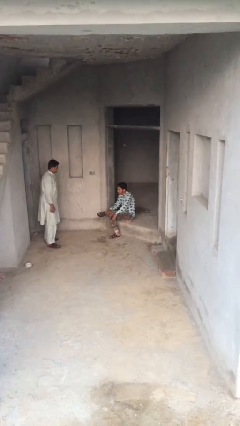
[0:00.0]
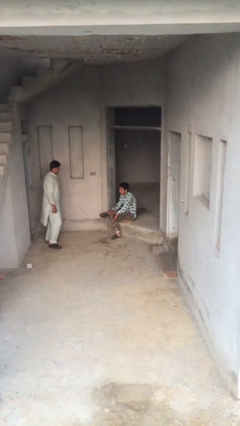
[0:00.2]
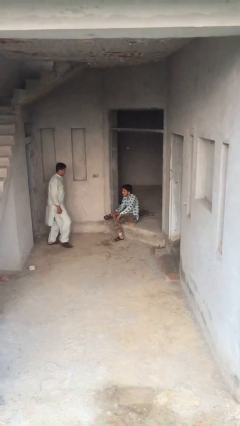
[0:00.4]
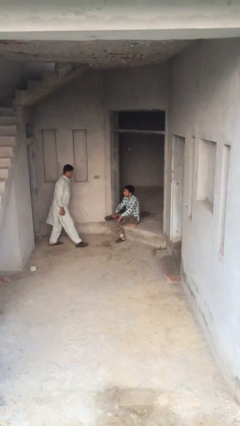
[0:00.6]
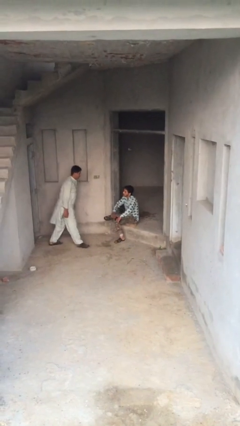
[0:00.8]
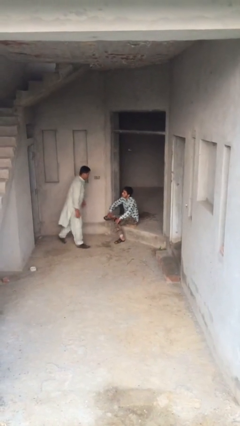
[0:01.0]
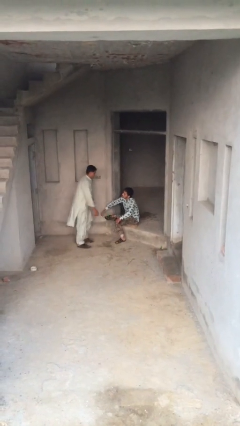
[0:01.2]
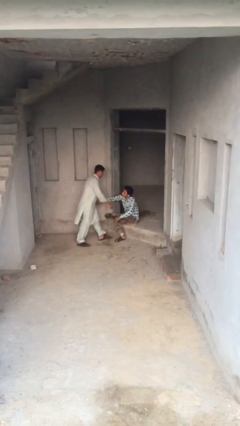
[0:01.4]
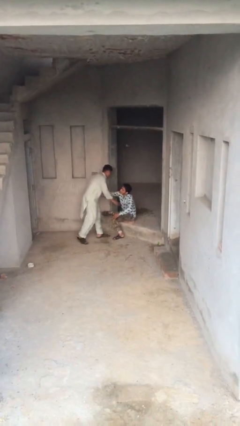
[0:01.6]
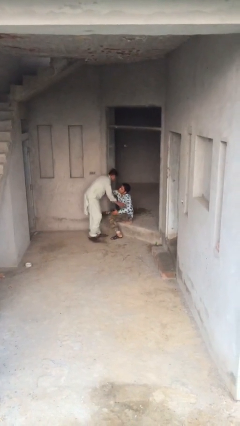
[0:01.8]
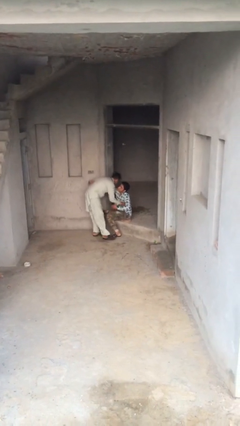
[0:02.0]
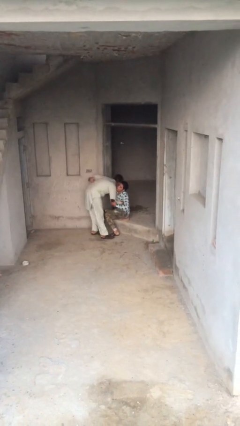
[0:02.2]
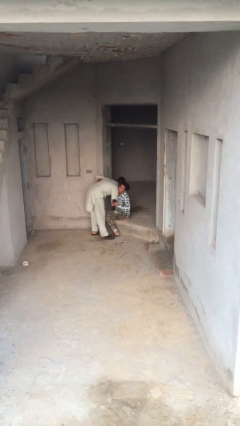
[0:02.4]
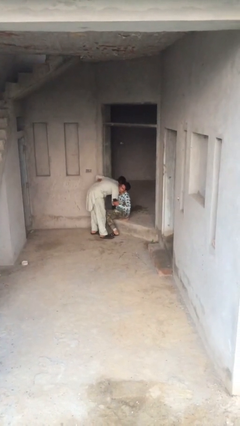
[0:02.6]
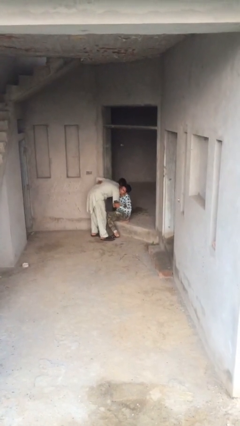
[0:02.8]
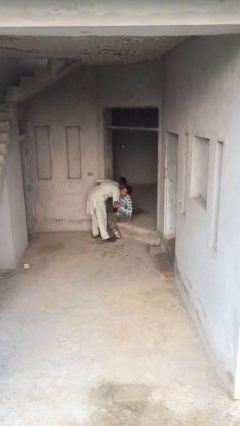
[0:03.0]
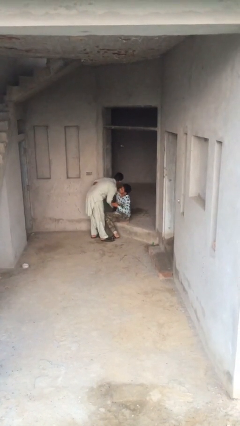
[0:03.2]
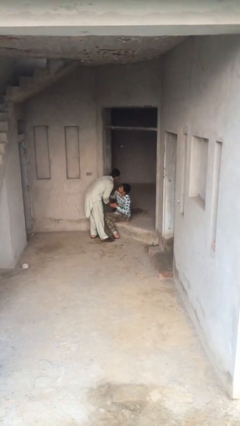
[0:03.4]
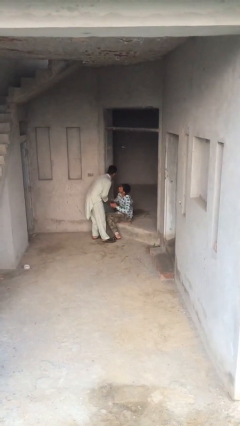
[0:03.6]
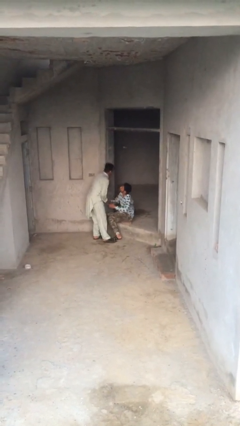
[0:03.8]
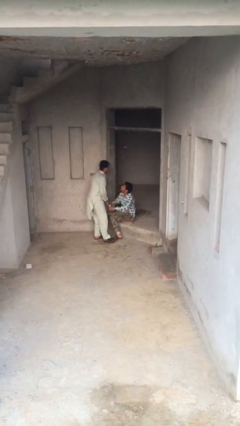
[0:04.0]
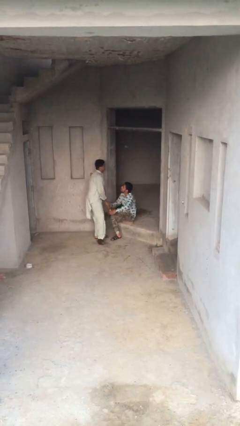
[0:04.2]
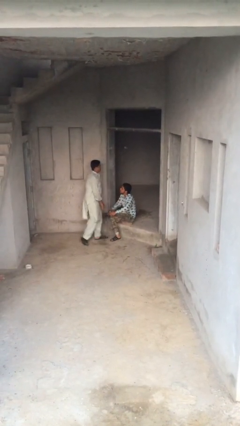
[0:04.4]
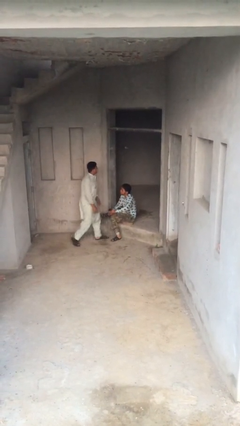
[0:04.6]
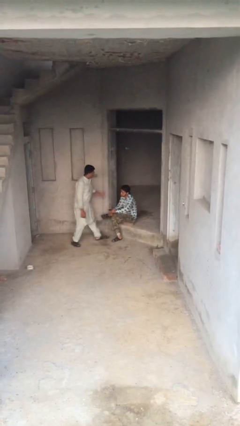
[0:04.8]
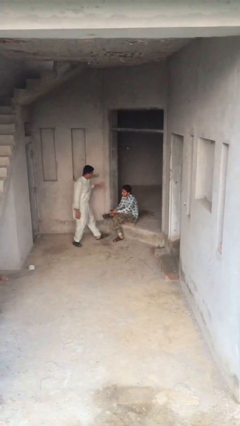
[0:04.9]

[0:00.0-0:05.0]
person embraces person

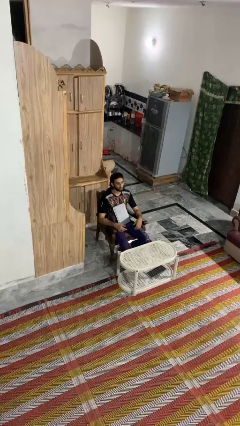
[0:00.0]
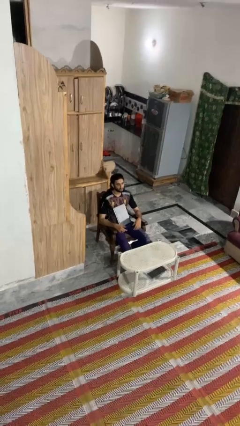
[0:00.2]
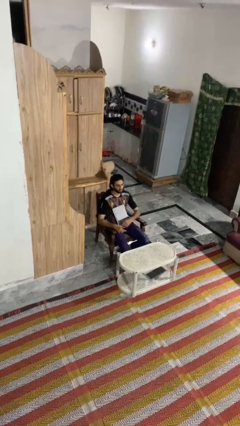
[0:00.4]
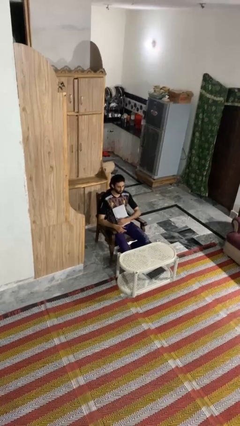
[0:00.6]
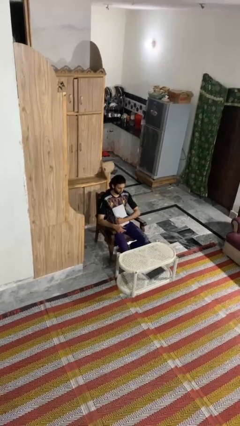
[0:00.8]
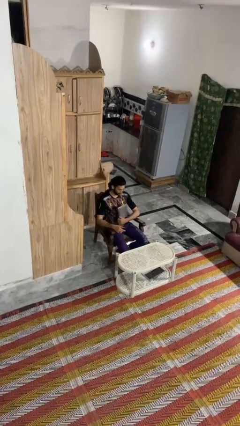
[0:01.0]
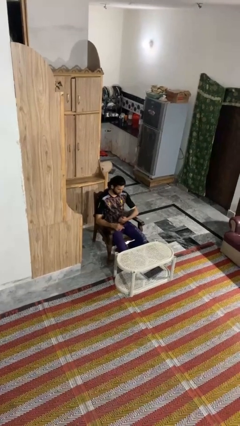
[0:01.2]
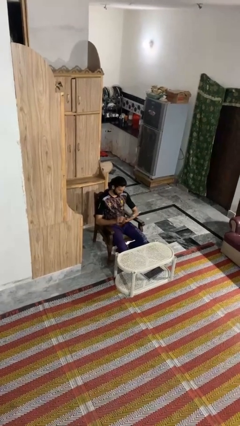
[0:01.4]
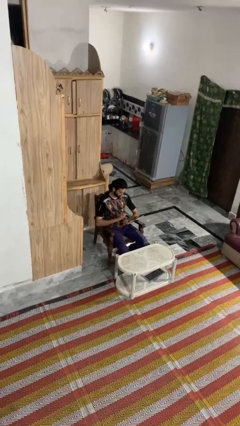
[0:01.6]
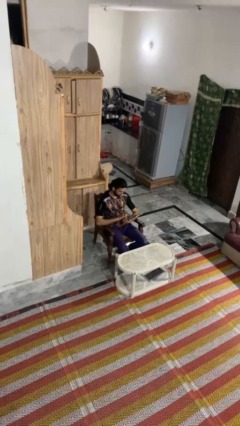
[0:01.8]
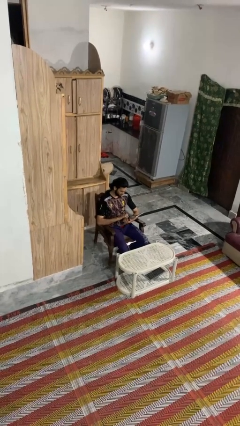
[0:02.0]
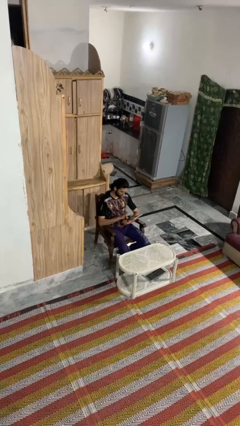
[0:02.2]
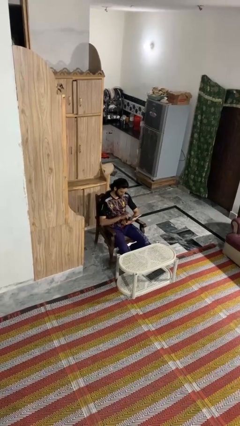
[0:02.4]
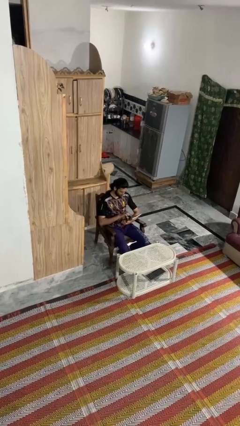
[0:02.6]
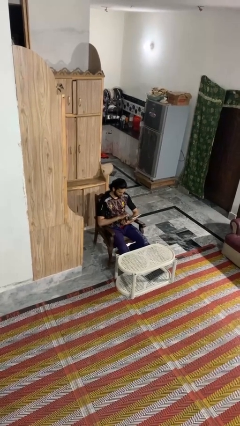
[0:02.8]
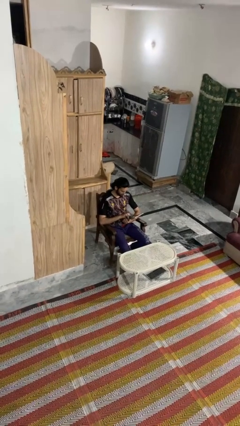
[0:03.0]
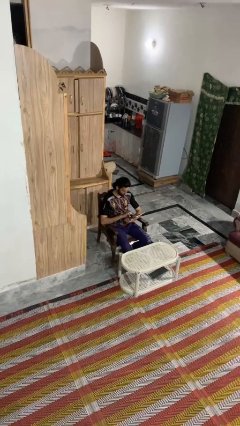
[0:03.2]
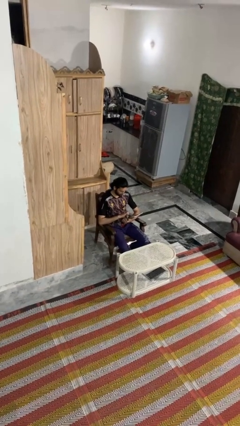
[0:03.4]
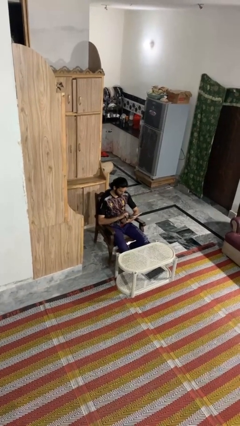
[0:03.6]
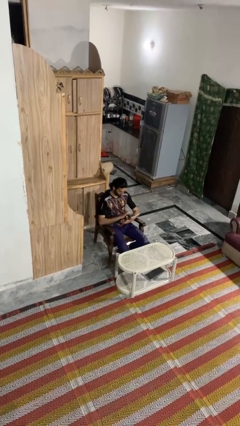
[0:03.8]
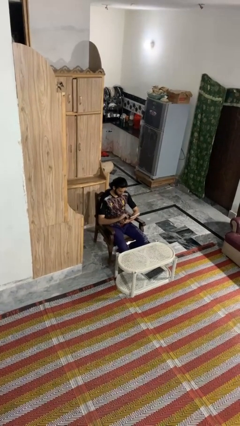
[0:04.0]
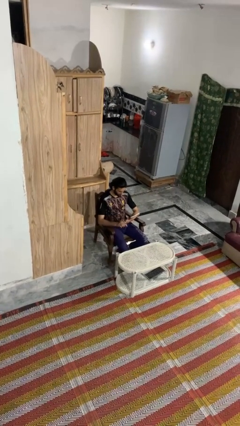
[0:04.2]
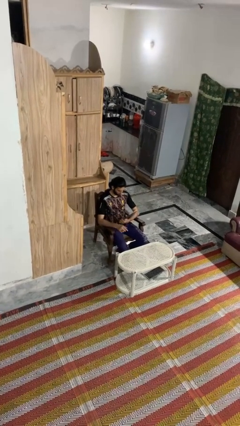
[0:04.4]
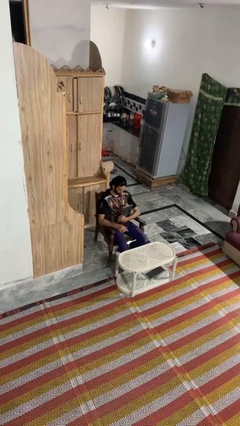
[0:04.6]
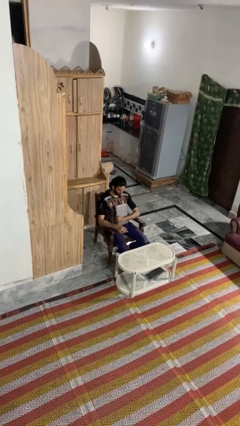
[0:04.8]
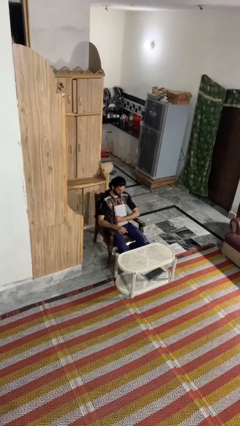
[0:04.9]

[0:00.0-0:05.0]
person interacts with tablet

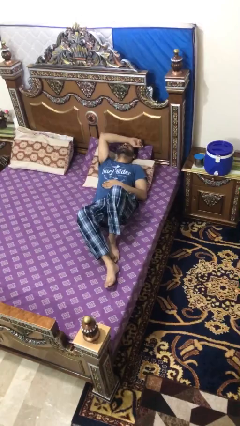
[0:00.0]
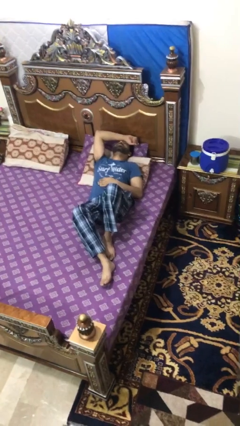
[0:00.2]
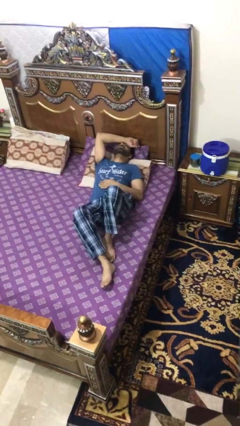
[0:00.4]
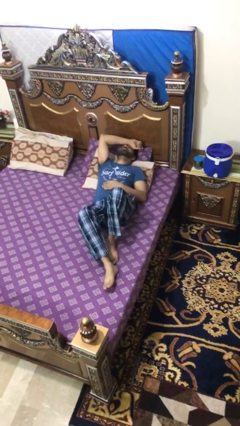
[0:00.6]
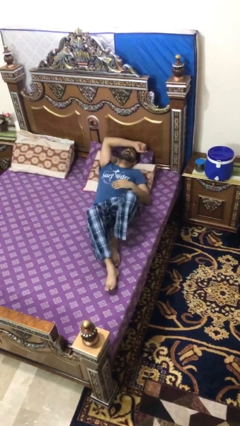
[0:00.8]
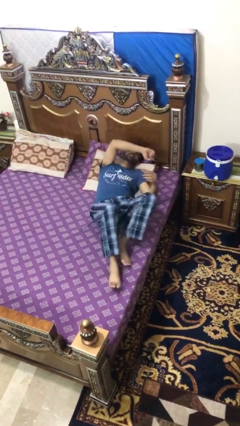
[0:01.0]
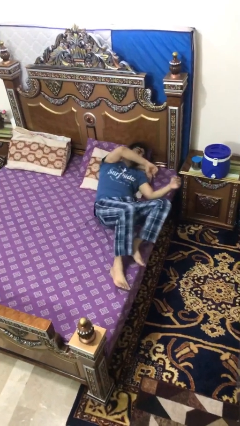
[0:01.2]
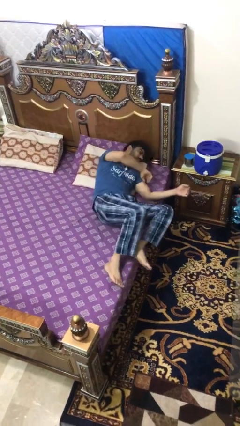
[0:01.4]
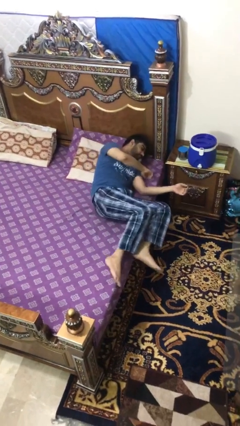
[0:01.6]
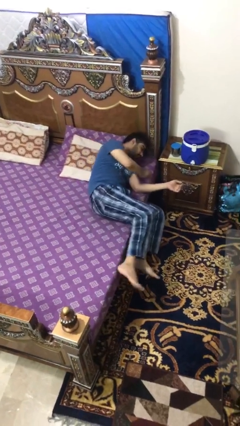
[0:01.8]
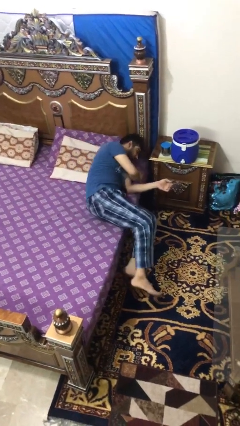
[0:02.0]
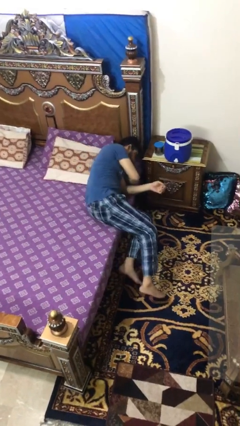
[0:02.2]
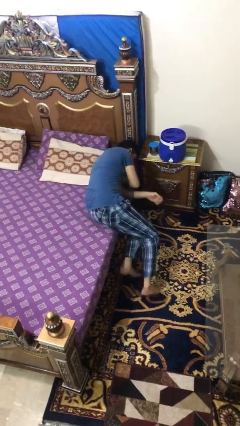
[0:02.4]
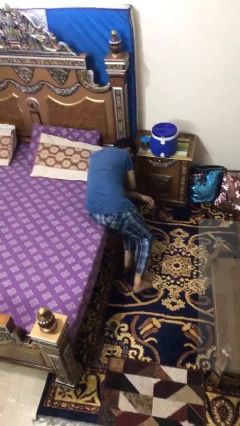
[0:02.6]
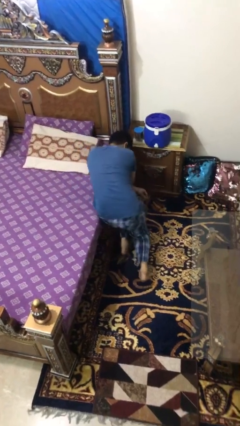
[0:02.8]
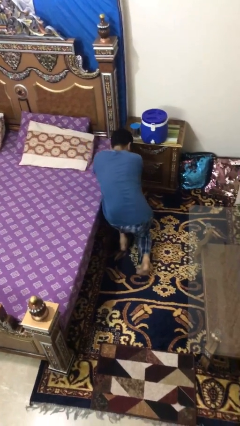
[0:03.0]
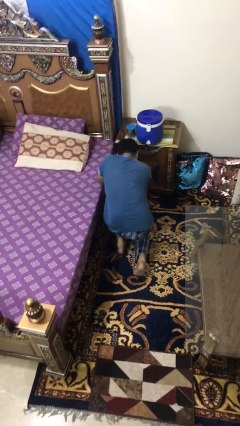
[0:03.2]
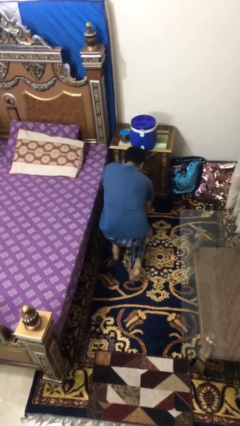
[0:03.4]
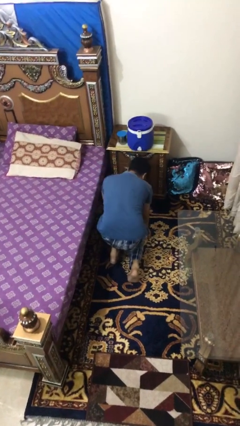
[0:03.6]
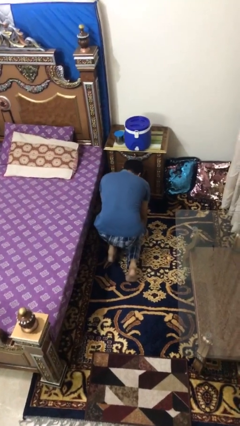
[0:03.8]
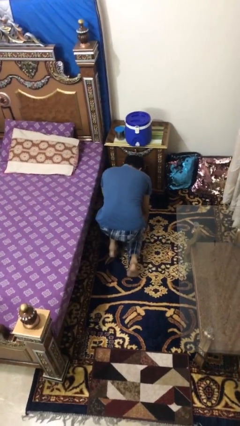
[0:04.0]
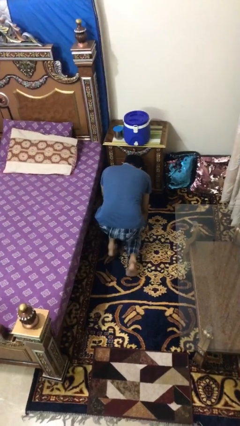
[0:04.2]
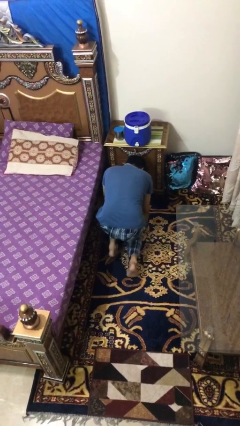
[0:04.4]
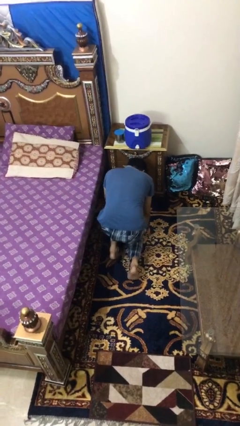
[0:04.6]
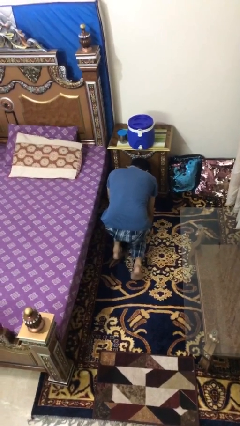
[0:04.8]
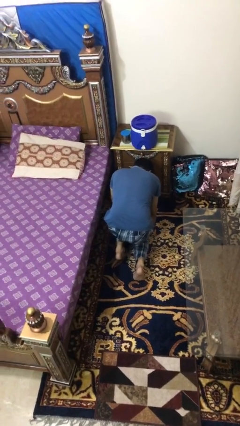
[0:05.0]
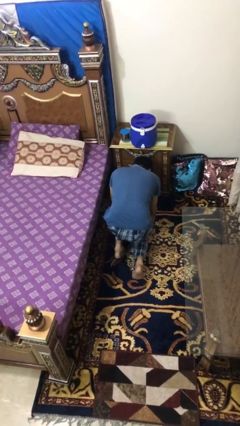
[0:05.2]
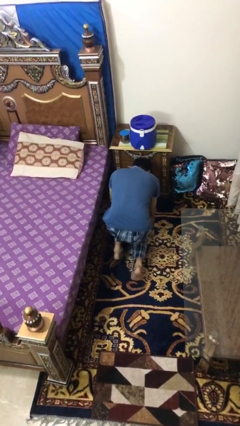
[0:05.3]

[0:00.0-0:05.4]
person falls from bed

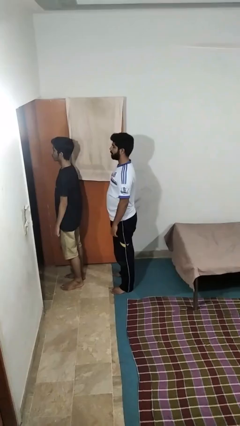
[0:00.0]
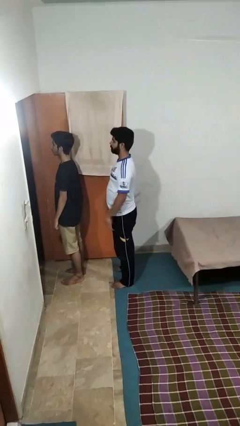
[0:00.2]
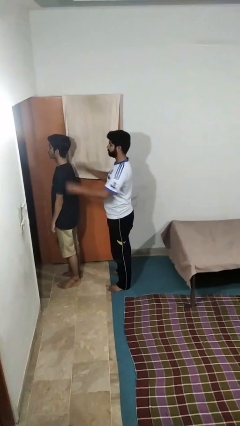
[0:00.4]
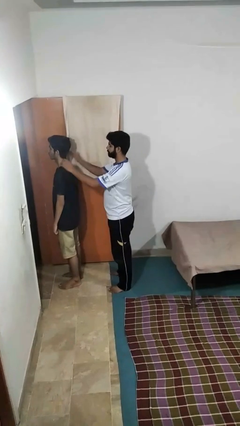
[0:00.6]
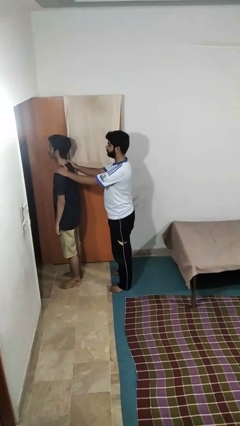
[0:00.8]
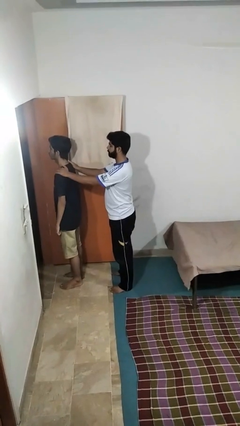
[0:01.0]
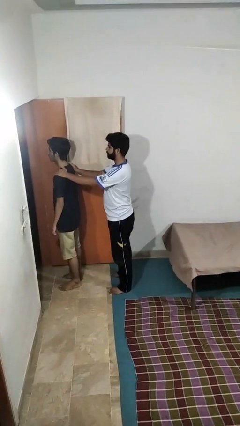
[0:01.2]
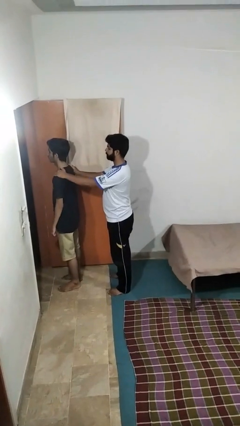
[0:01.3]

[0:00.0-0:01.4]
person grabs person by shoulder

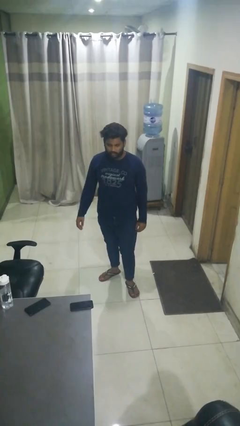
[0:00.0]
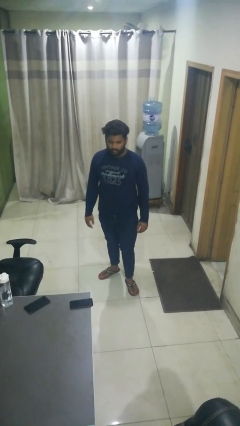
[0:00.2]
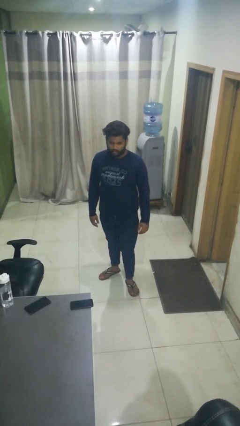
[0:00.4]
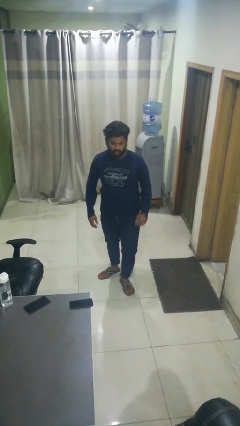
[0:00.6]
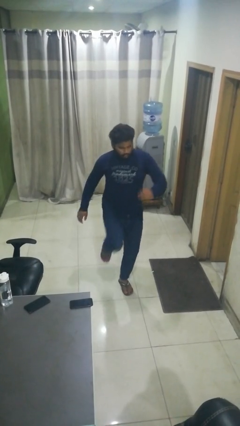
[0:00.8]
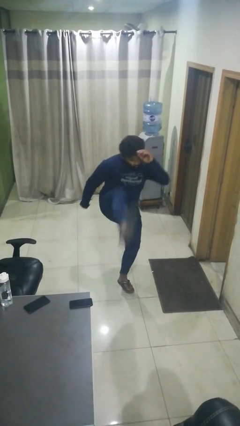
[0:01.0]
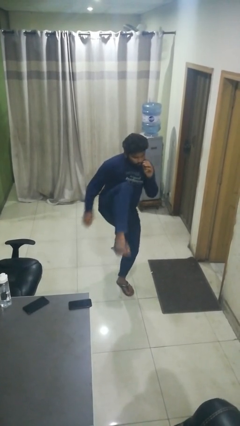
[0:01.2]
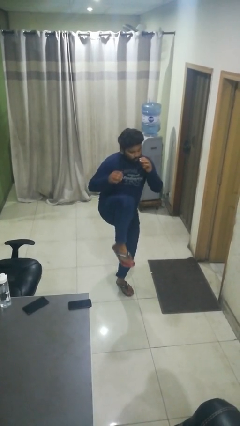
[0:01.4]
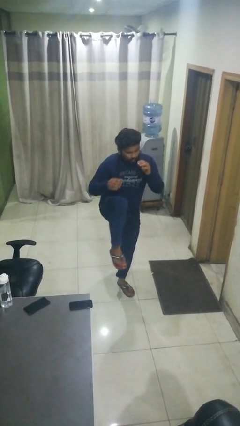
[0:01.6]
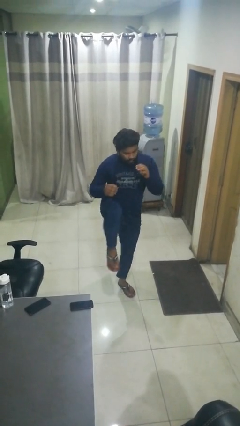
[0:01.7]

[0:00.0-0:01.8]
person karate kicks
